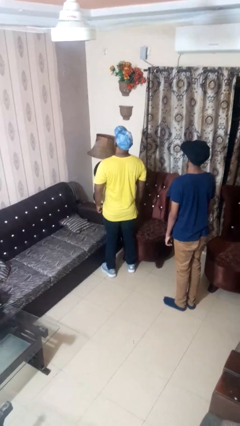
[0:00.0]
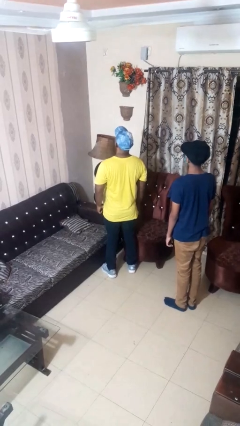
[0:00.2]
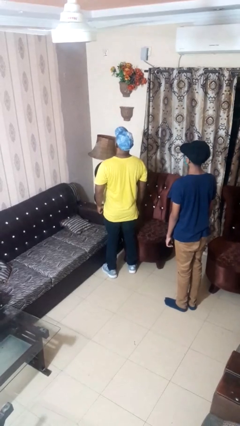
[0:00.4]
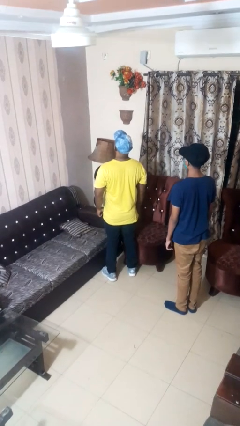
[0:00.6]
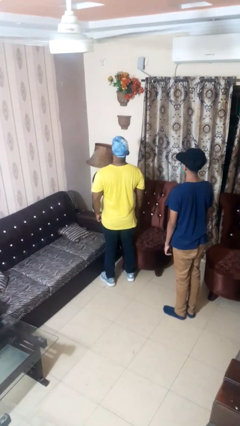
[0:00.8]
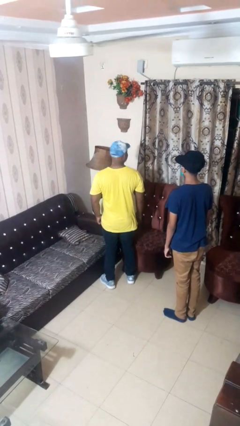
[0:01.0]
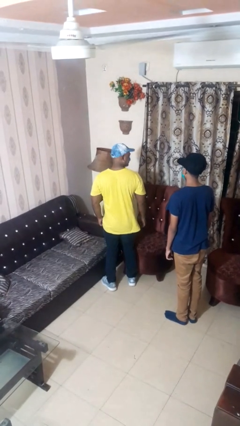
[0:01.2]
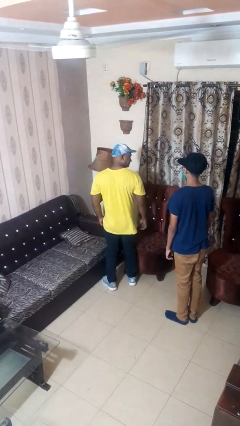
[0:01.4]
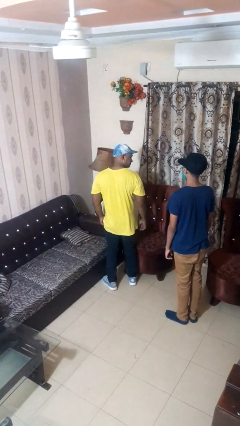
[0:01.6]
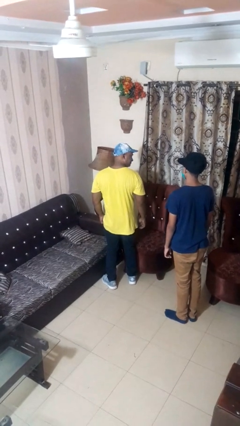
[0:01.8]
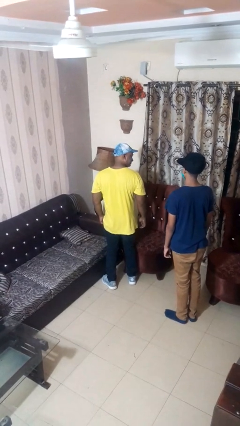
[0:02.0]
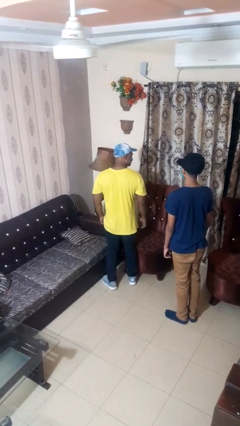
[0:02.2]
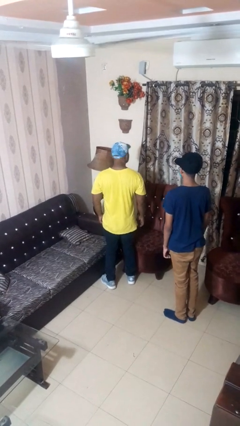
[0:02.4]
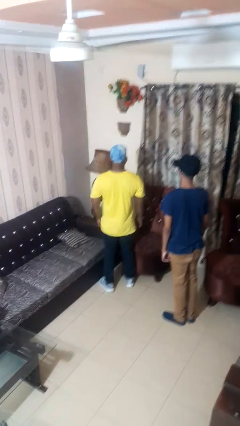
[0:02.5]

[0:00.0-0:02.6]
person looks over shoulder

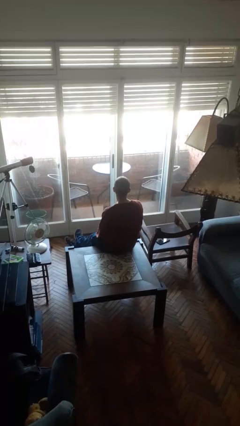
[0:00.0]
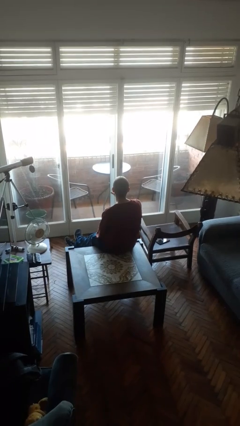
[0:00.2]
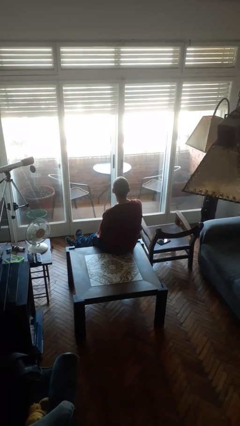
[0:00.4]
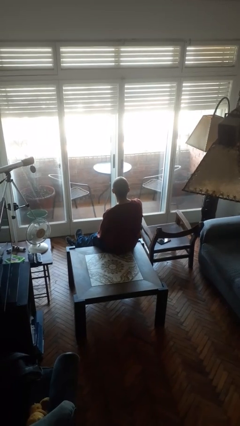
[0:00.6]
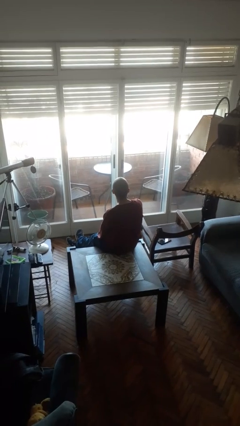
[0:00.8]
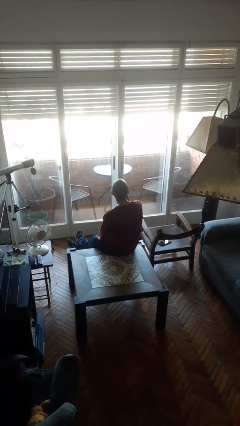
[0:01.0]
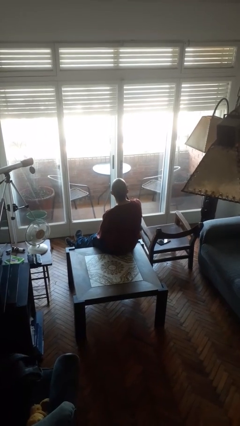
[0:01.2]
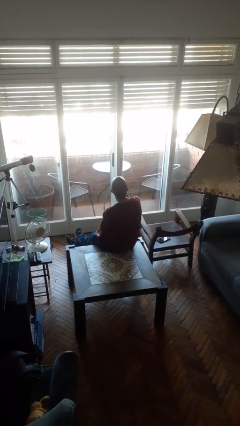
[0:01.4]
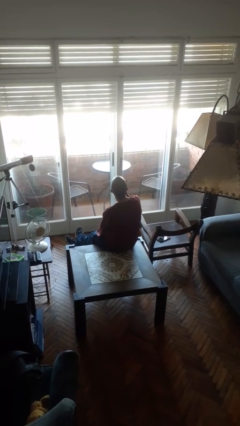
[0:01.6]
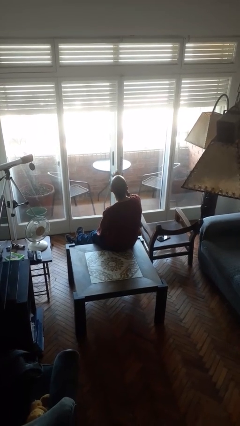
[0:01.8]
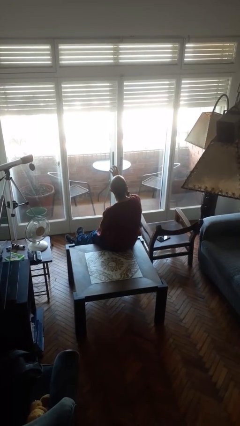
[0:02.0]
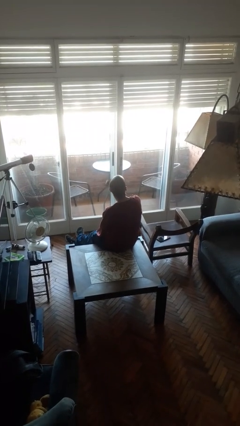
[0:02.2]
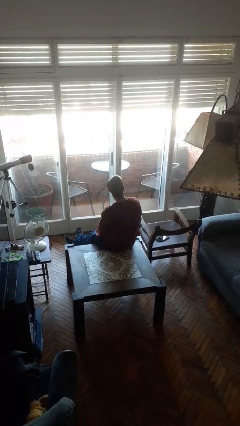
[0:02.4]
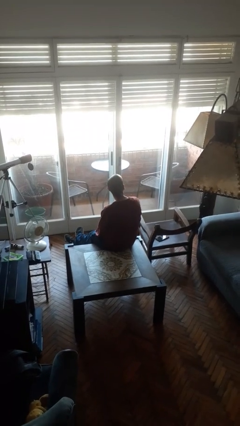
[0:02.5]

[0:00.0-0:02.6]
person licks fingers

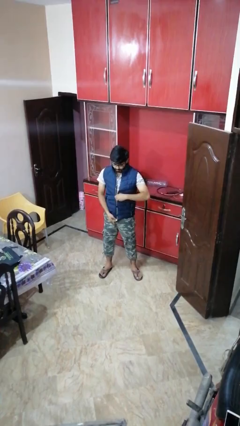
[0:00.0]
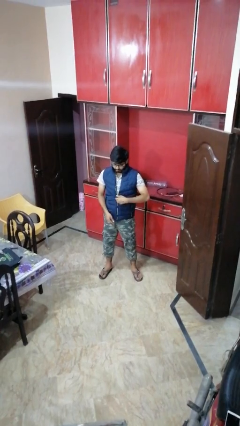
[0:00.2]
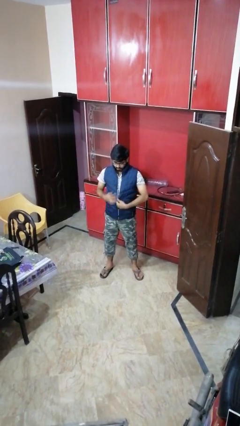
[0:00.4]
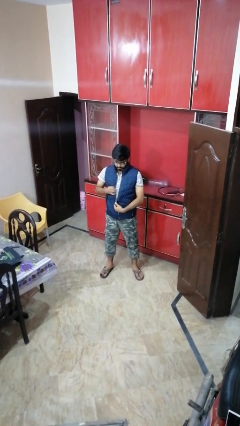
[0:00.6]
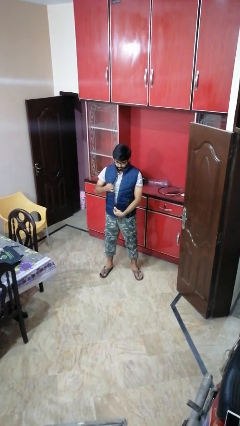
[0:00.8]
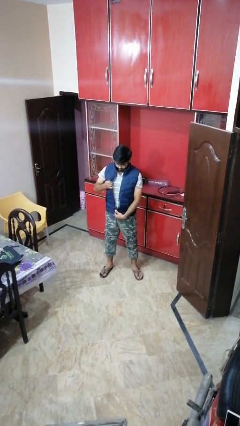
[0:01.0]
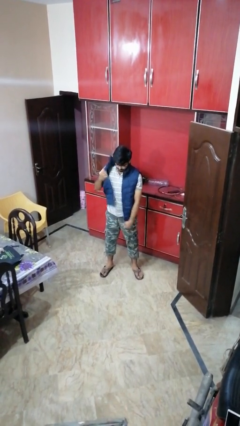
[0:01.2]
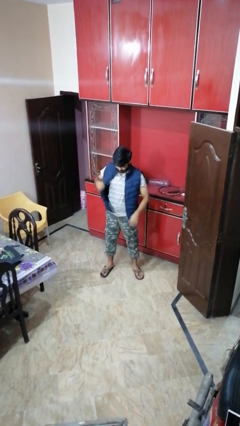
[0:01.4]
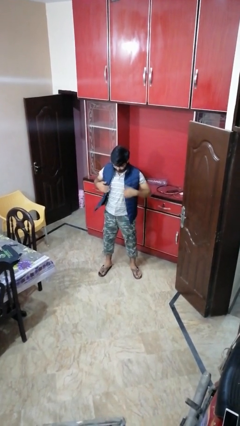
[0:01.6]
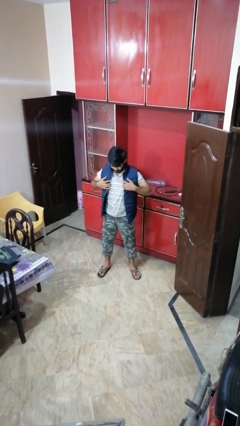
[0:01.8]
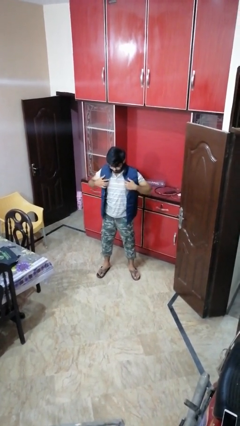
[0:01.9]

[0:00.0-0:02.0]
person unzips jacket

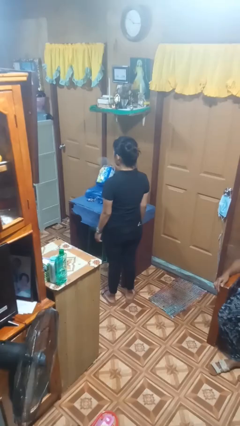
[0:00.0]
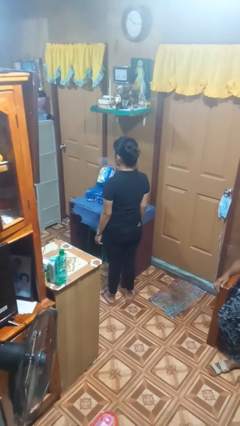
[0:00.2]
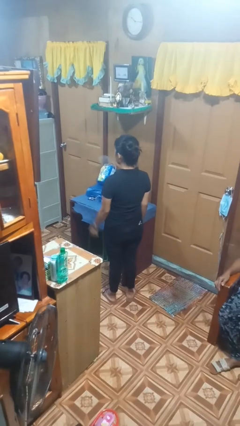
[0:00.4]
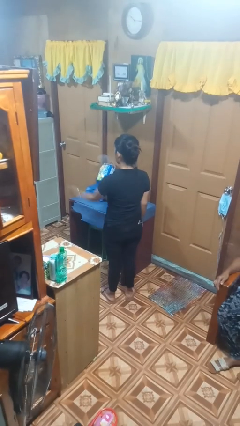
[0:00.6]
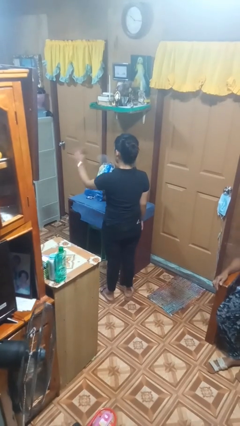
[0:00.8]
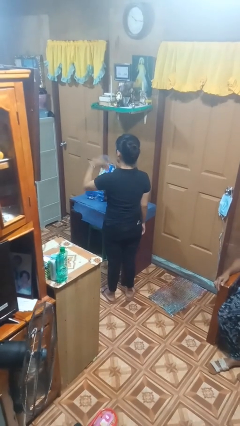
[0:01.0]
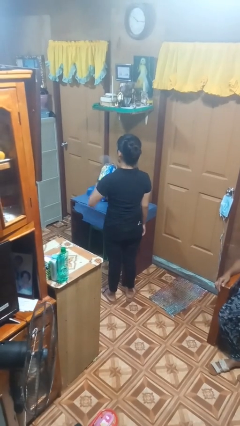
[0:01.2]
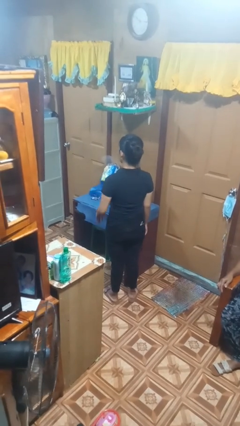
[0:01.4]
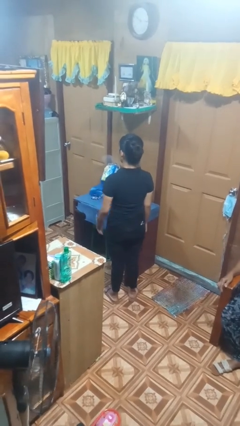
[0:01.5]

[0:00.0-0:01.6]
person gestures come here

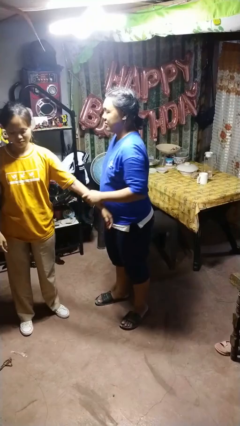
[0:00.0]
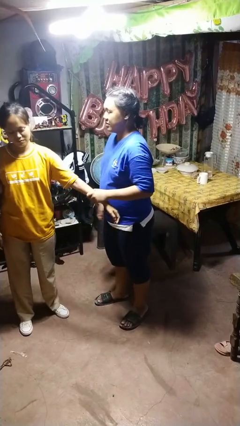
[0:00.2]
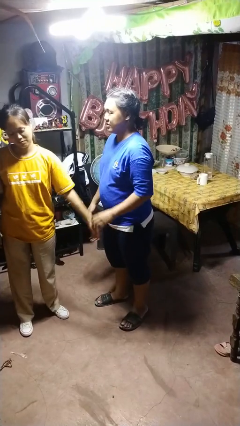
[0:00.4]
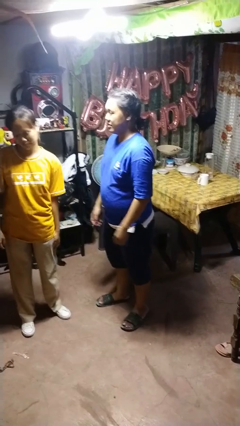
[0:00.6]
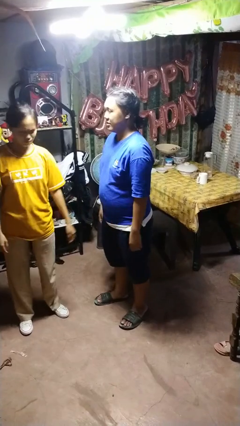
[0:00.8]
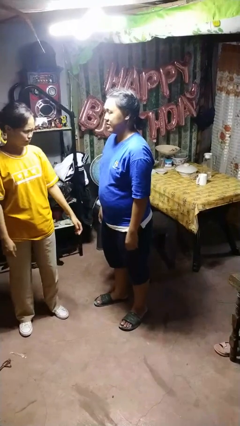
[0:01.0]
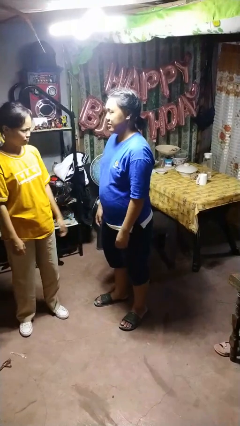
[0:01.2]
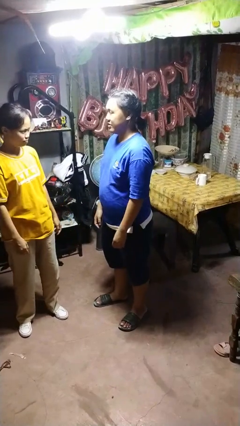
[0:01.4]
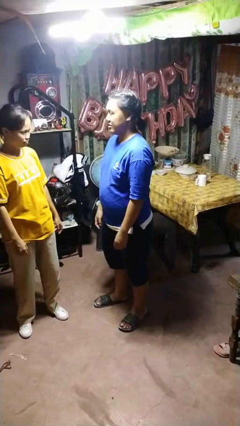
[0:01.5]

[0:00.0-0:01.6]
person grabs person by forearm

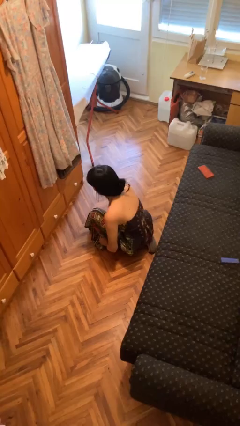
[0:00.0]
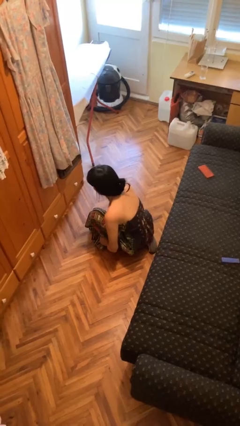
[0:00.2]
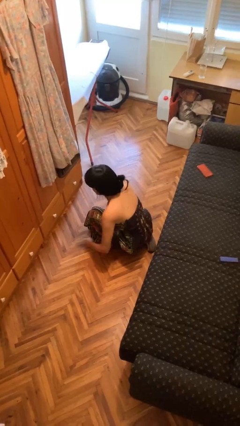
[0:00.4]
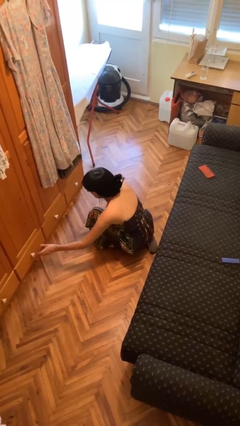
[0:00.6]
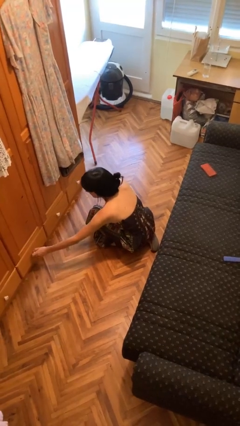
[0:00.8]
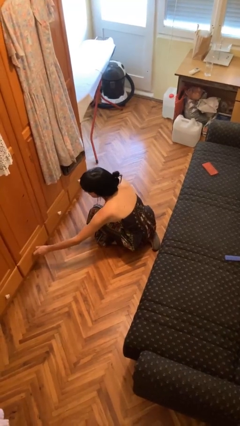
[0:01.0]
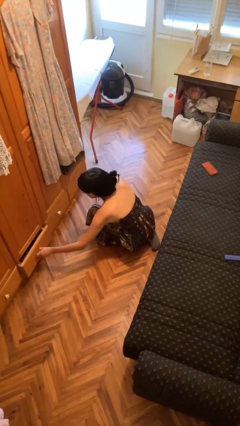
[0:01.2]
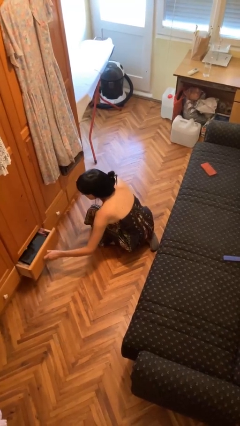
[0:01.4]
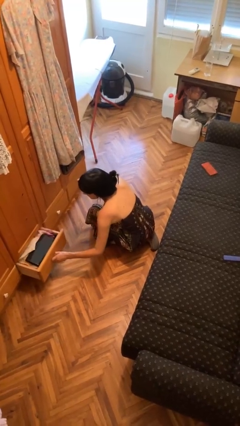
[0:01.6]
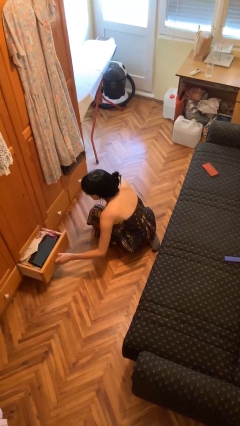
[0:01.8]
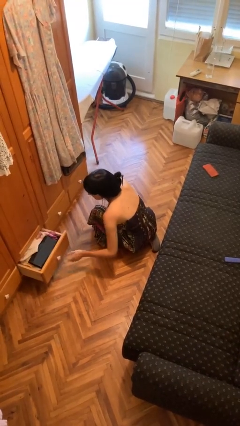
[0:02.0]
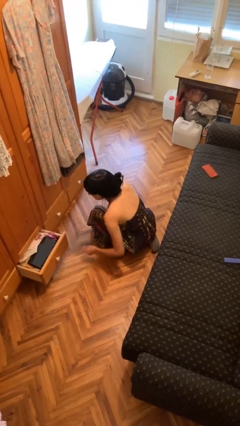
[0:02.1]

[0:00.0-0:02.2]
person opens dresser drawer

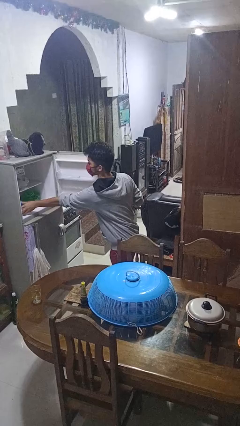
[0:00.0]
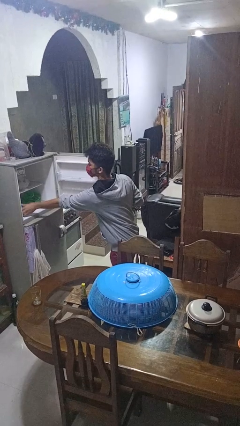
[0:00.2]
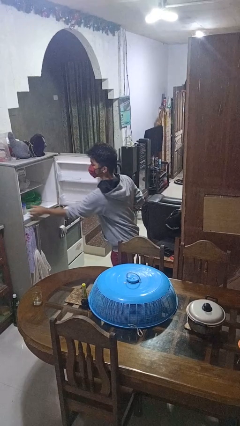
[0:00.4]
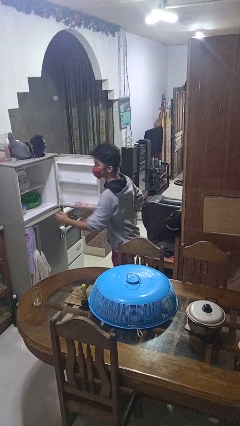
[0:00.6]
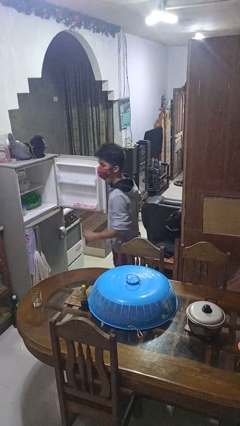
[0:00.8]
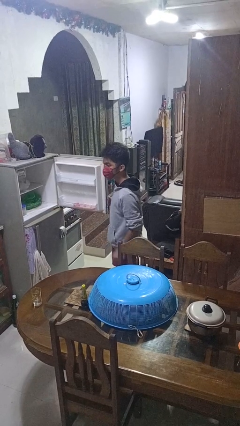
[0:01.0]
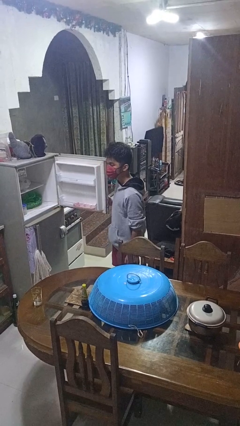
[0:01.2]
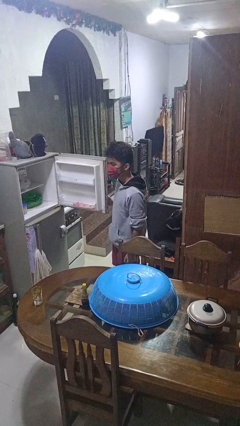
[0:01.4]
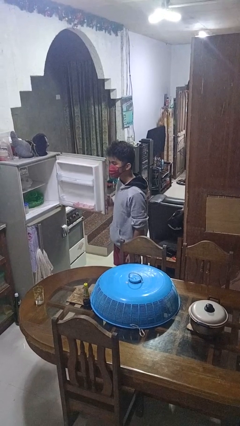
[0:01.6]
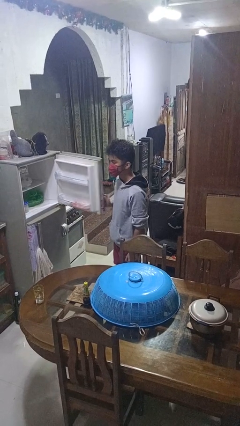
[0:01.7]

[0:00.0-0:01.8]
person puts object into refrigerator

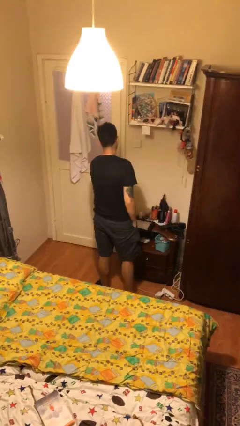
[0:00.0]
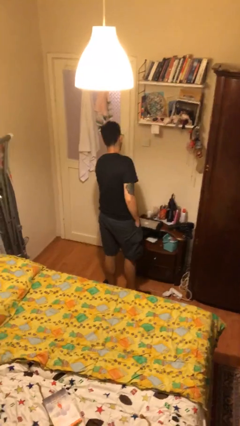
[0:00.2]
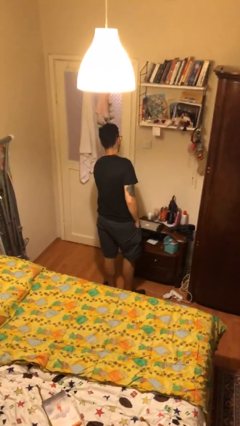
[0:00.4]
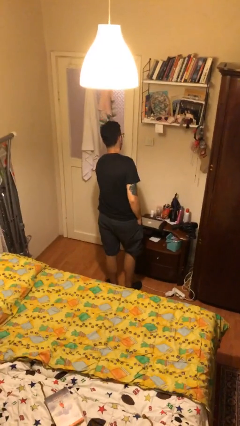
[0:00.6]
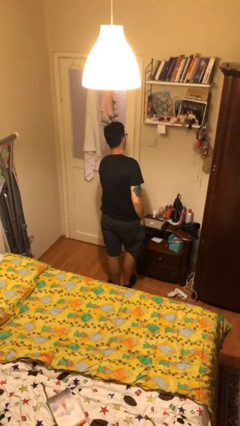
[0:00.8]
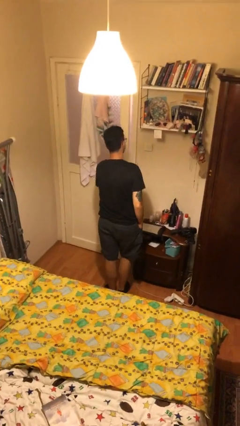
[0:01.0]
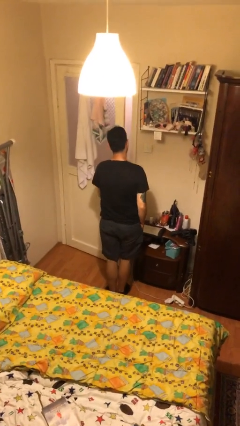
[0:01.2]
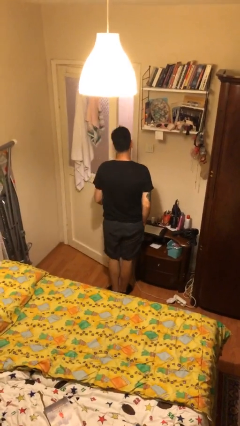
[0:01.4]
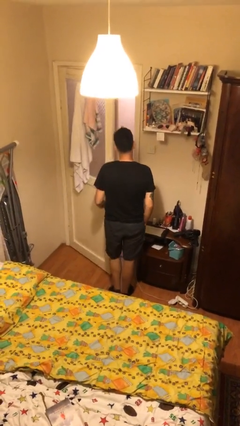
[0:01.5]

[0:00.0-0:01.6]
person opens facility door

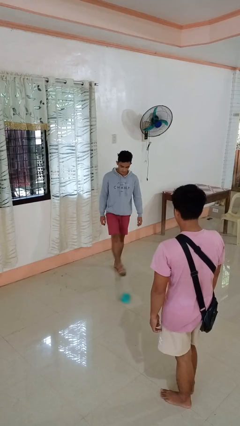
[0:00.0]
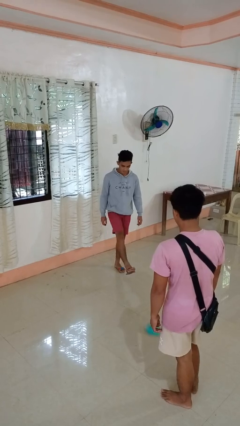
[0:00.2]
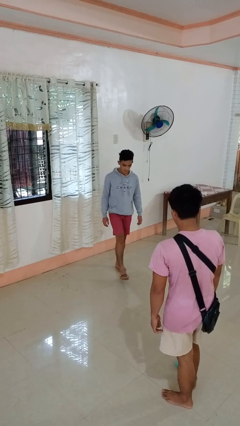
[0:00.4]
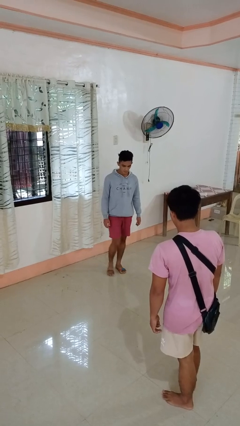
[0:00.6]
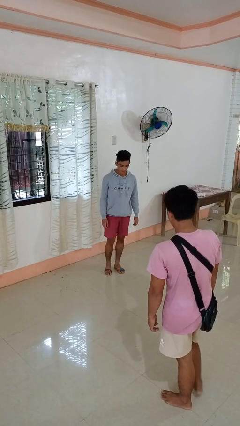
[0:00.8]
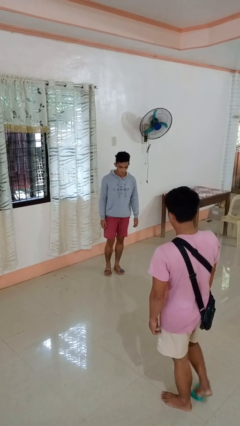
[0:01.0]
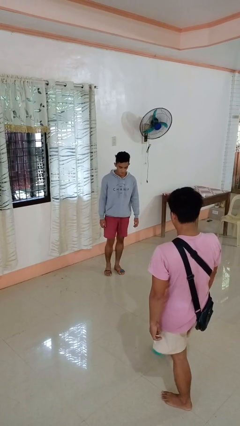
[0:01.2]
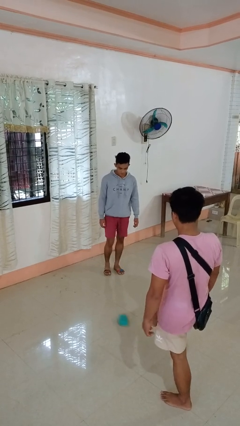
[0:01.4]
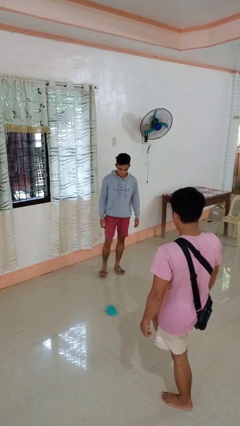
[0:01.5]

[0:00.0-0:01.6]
person kicks object to person
